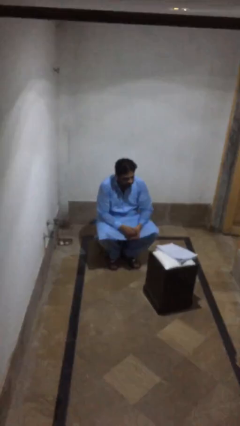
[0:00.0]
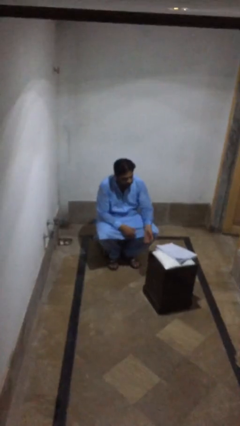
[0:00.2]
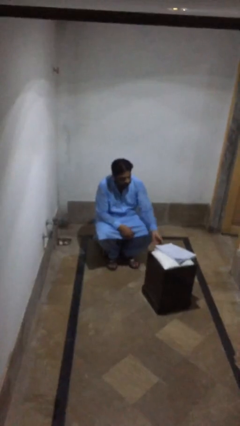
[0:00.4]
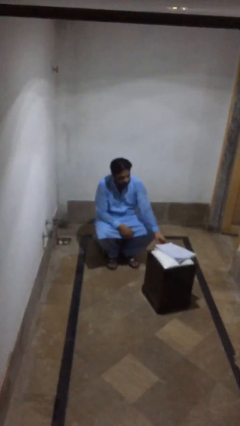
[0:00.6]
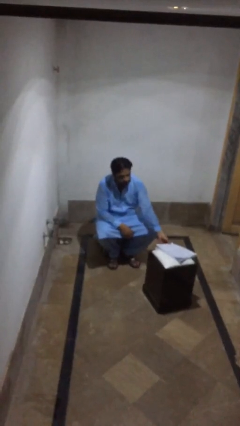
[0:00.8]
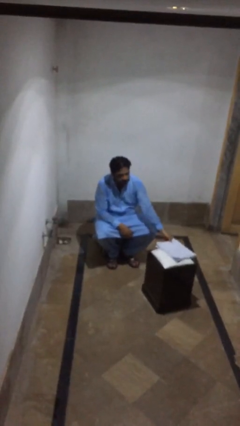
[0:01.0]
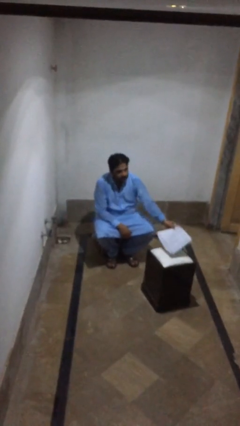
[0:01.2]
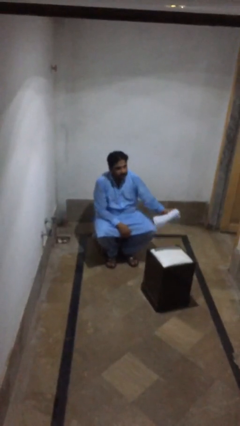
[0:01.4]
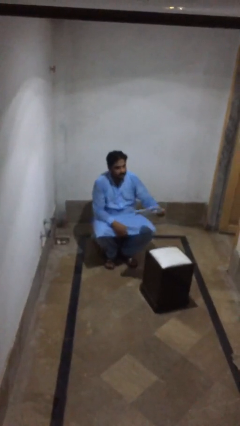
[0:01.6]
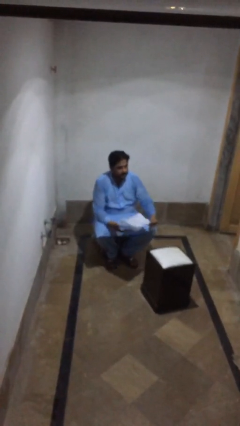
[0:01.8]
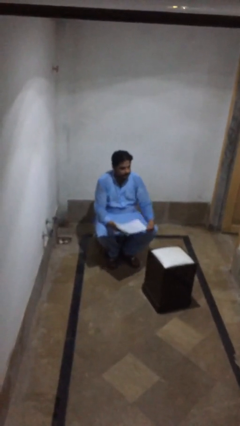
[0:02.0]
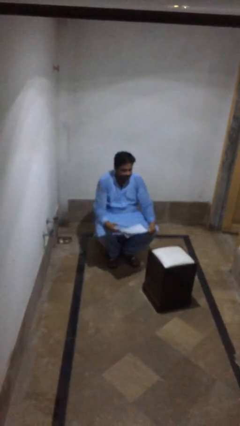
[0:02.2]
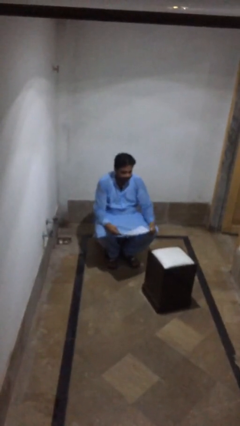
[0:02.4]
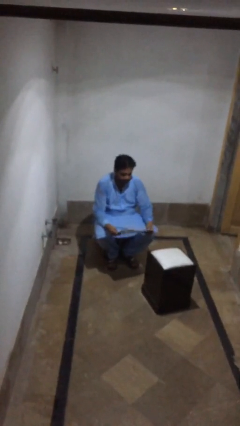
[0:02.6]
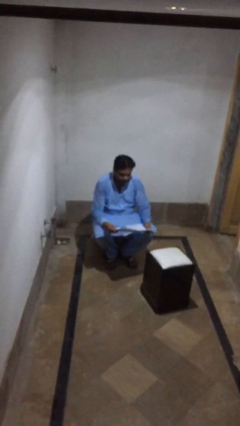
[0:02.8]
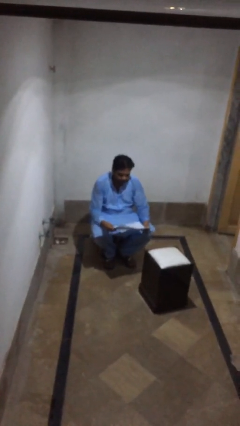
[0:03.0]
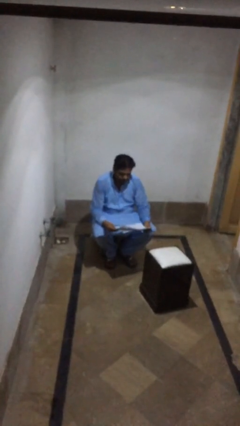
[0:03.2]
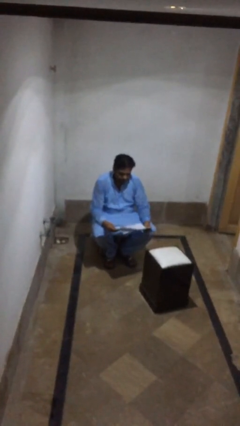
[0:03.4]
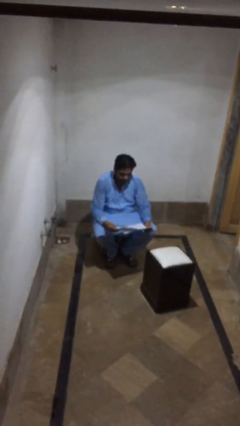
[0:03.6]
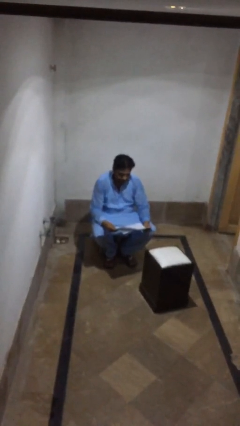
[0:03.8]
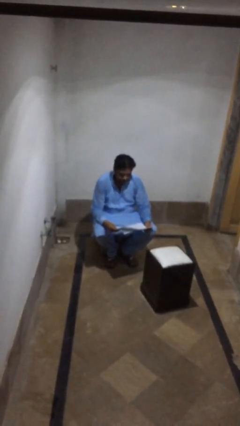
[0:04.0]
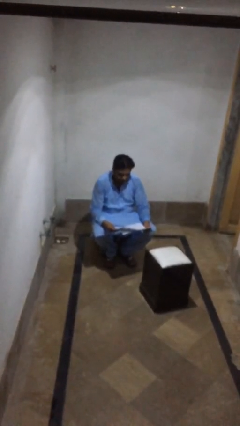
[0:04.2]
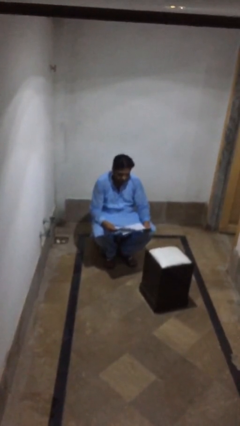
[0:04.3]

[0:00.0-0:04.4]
person picks up object from table

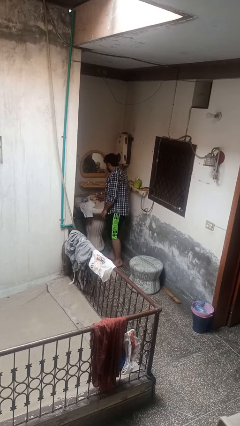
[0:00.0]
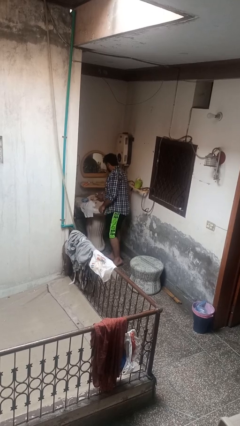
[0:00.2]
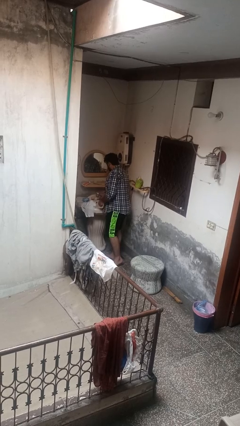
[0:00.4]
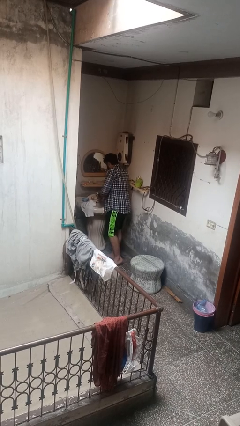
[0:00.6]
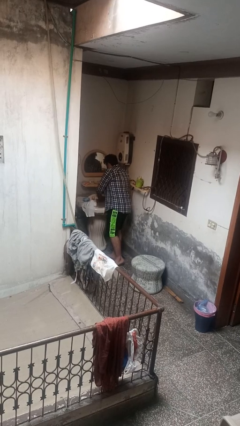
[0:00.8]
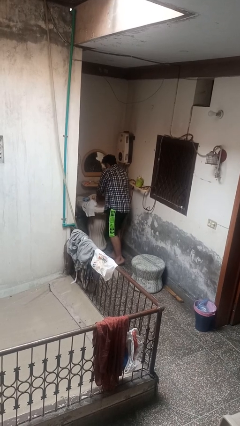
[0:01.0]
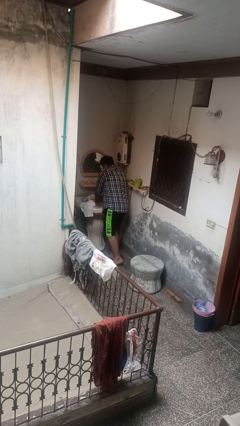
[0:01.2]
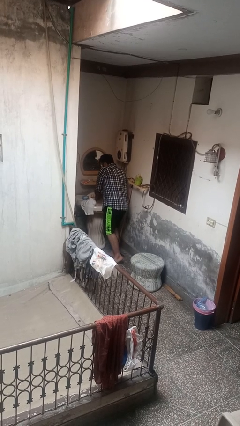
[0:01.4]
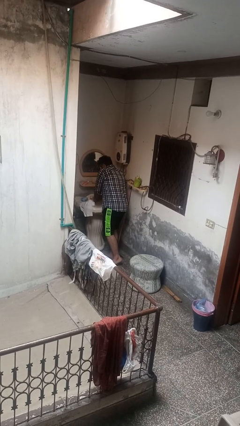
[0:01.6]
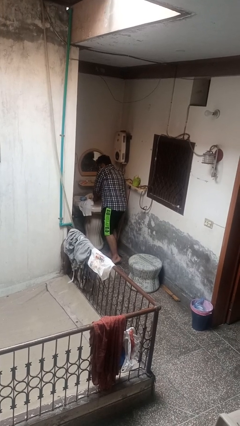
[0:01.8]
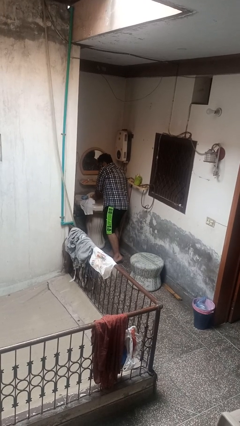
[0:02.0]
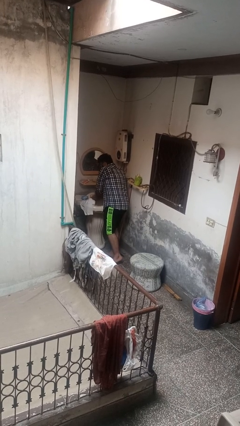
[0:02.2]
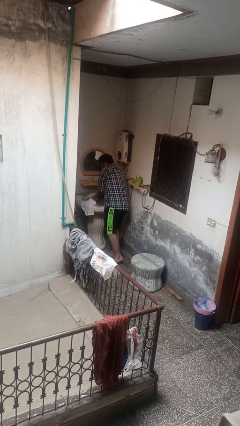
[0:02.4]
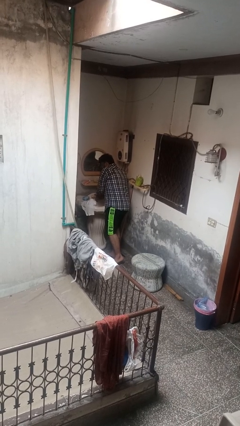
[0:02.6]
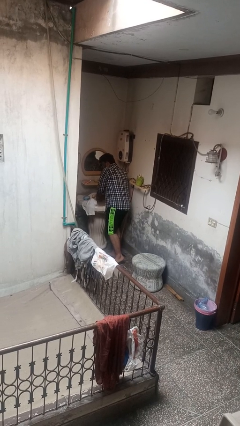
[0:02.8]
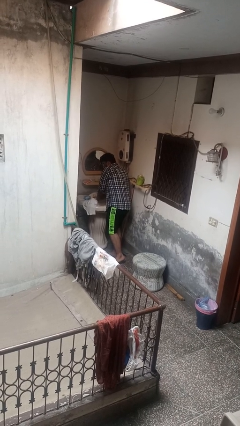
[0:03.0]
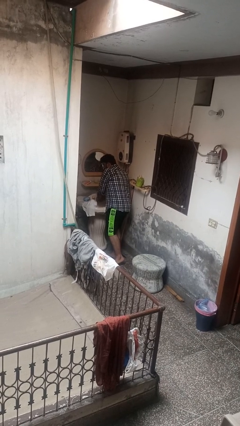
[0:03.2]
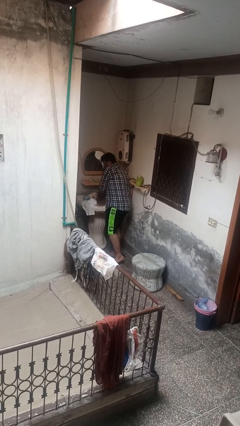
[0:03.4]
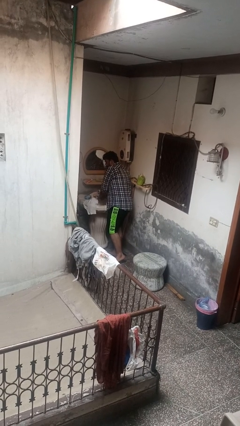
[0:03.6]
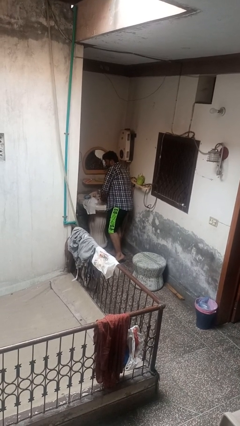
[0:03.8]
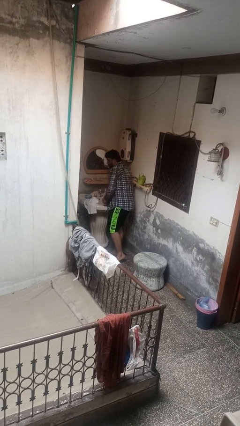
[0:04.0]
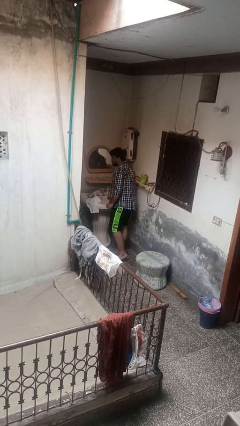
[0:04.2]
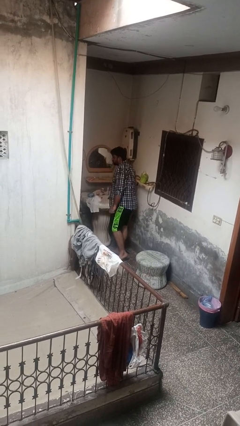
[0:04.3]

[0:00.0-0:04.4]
person washes hands

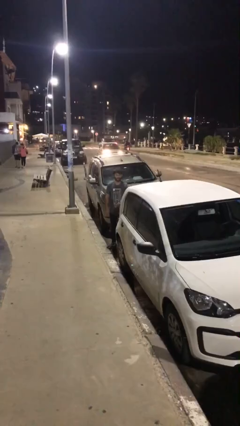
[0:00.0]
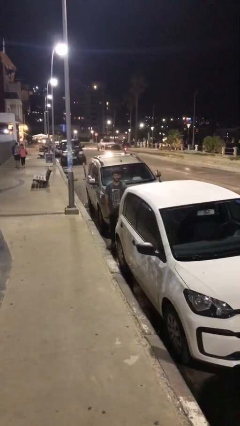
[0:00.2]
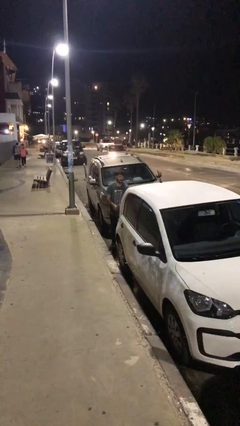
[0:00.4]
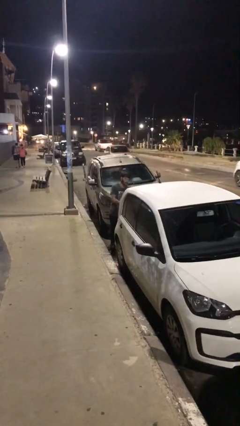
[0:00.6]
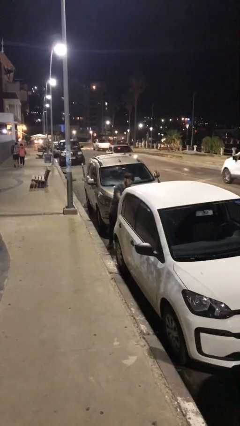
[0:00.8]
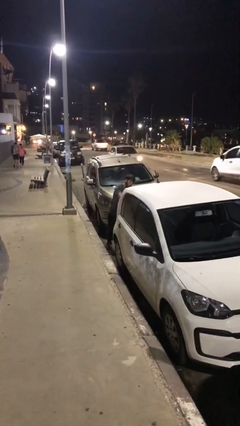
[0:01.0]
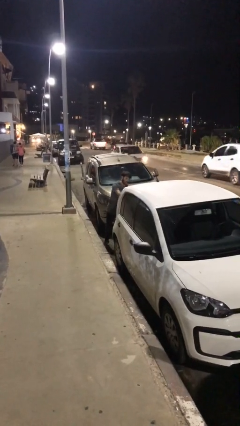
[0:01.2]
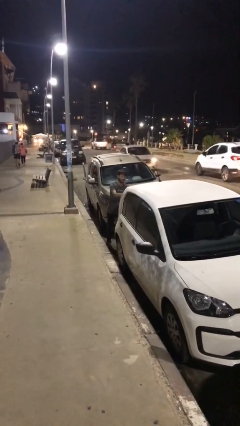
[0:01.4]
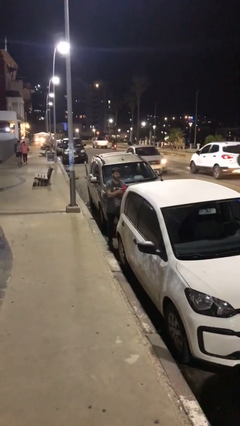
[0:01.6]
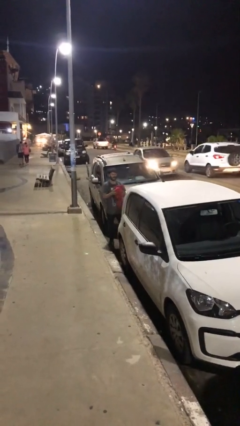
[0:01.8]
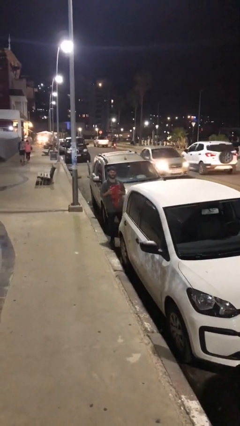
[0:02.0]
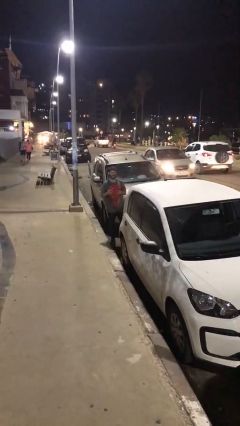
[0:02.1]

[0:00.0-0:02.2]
person unloads car

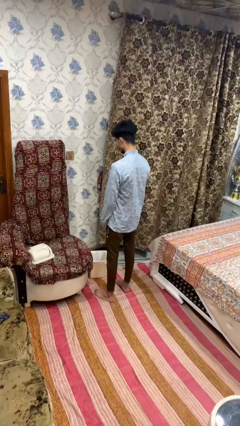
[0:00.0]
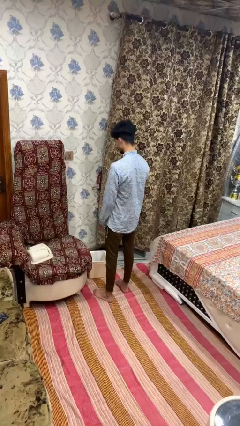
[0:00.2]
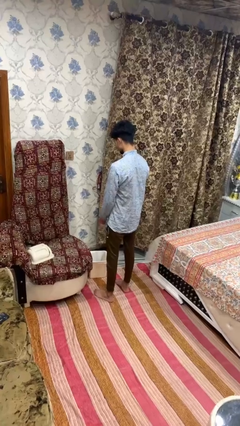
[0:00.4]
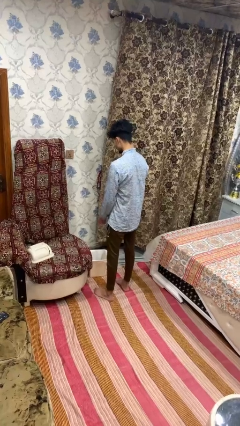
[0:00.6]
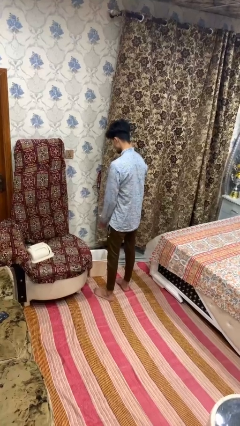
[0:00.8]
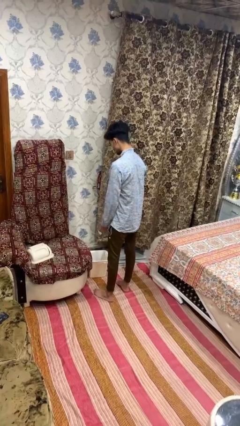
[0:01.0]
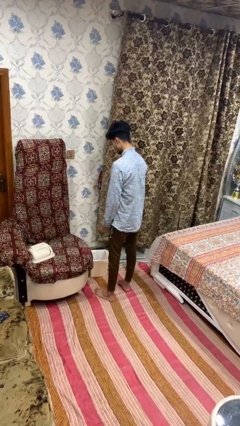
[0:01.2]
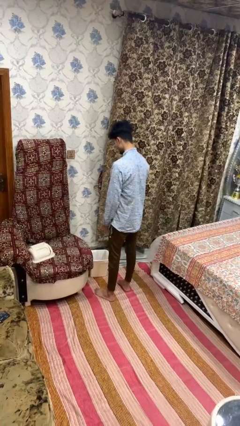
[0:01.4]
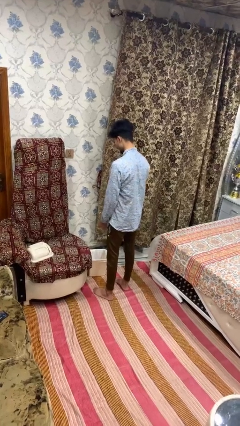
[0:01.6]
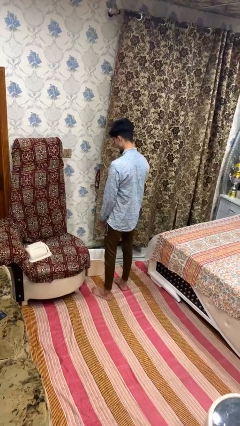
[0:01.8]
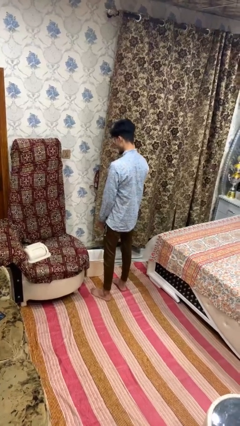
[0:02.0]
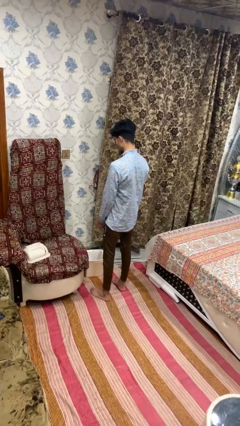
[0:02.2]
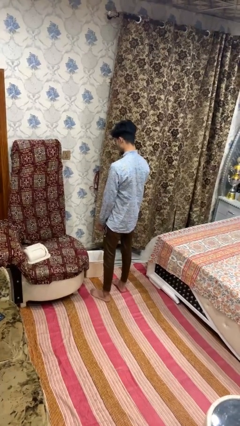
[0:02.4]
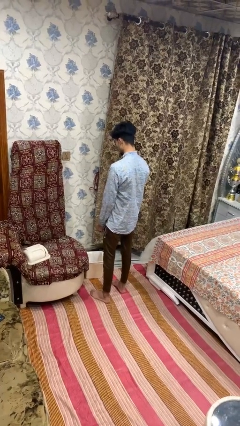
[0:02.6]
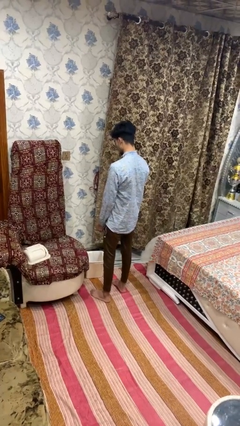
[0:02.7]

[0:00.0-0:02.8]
person discards trash

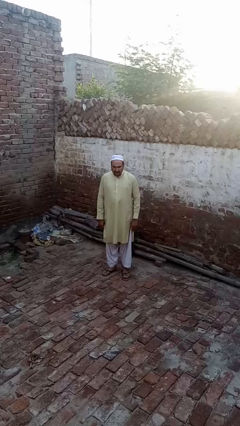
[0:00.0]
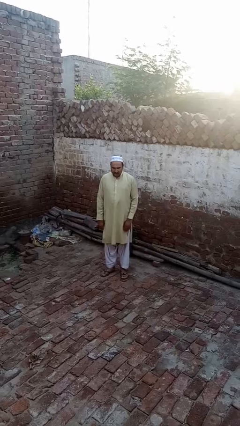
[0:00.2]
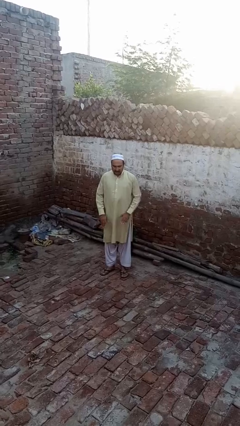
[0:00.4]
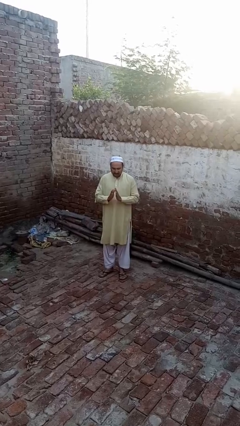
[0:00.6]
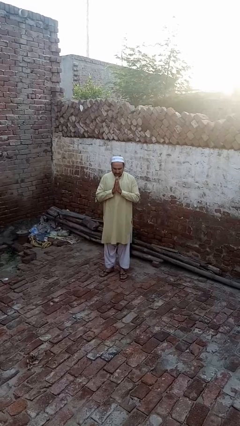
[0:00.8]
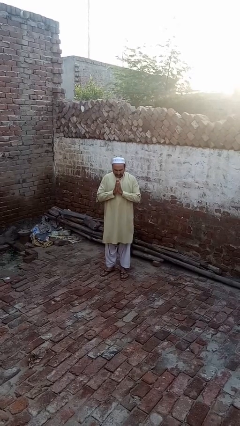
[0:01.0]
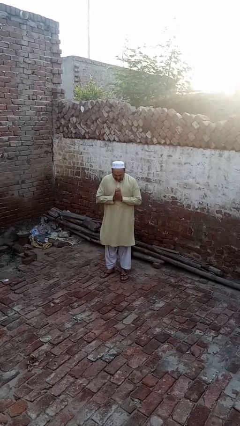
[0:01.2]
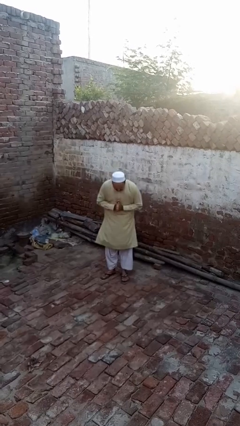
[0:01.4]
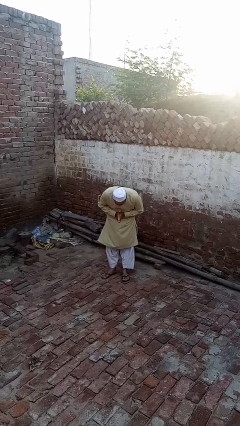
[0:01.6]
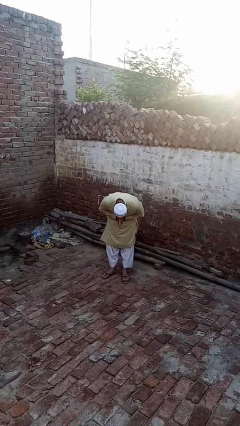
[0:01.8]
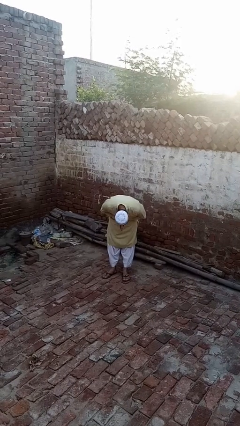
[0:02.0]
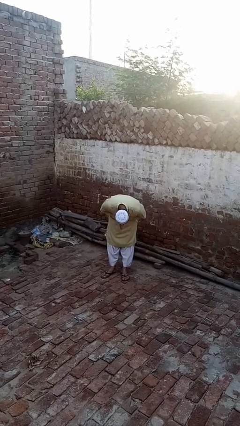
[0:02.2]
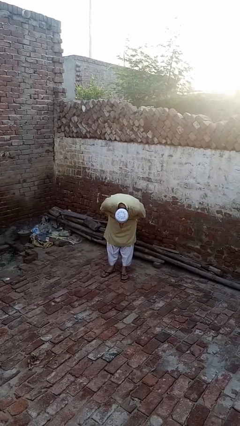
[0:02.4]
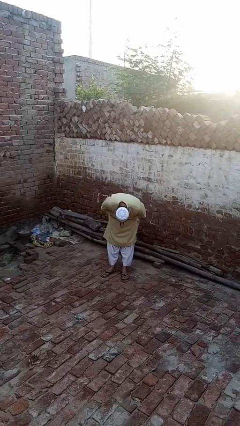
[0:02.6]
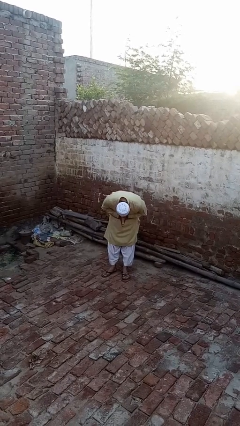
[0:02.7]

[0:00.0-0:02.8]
person bows

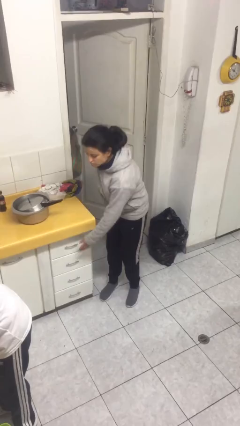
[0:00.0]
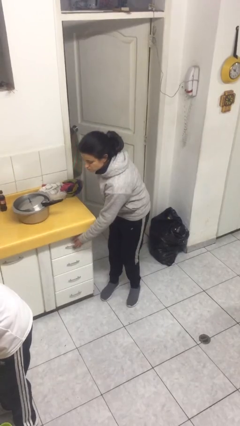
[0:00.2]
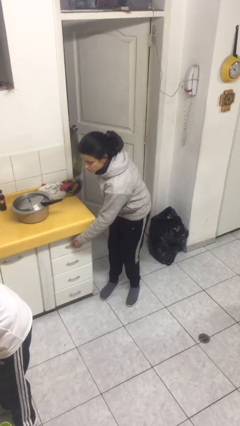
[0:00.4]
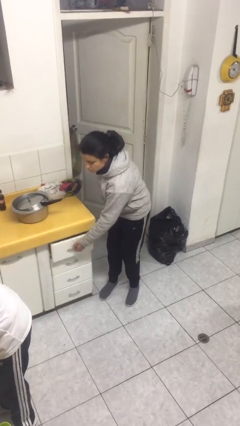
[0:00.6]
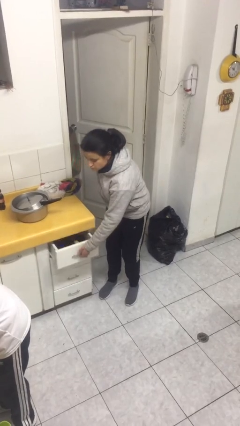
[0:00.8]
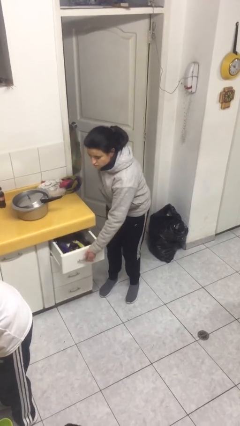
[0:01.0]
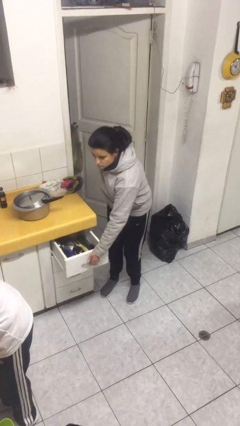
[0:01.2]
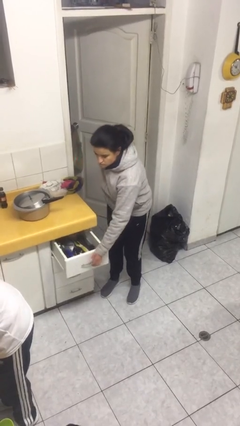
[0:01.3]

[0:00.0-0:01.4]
person opens kitchen drawer
